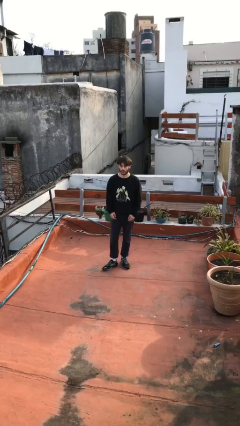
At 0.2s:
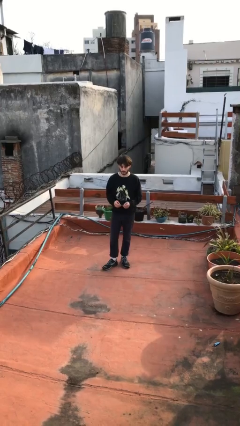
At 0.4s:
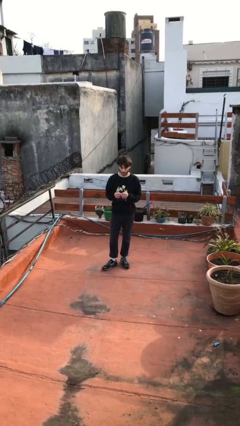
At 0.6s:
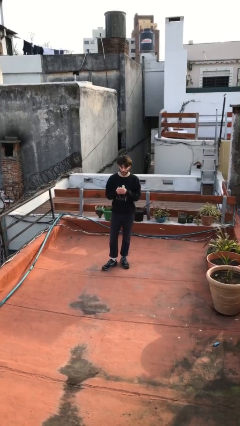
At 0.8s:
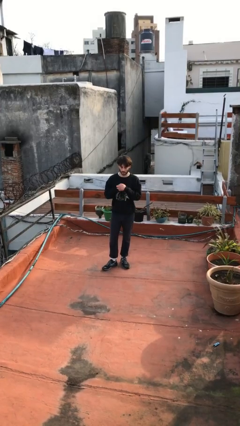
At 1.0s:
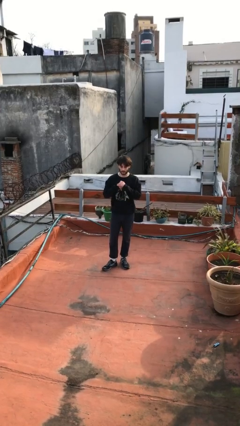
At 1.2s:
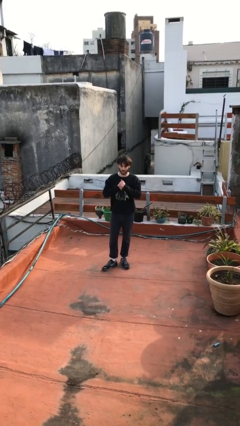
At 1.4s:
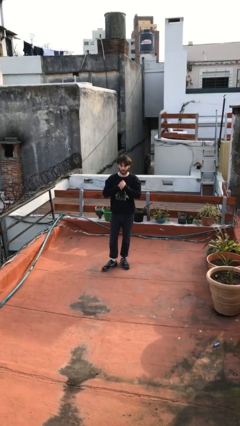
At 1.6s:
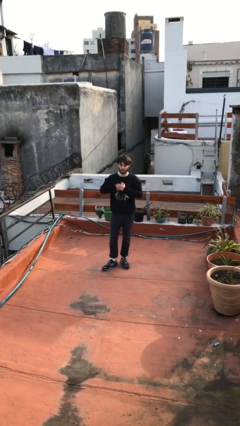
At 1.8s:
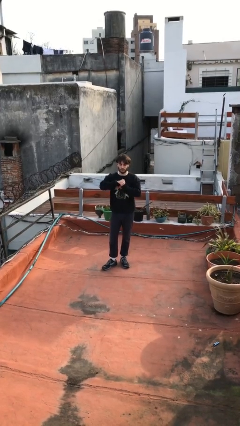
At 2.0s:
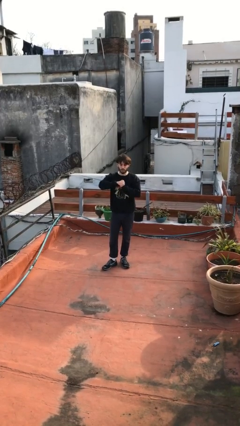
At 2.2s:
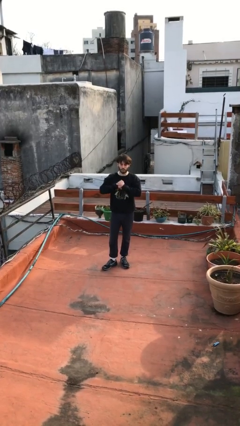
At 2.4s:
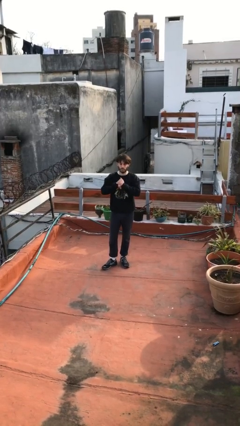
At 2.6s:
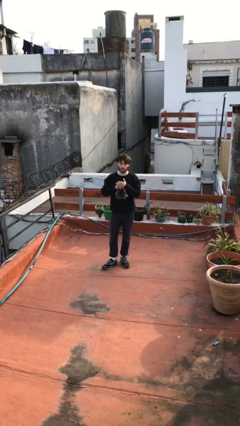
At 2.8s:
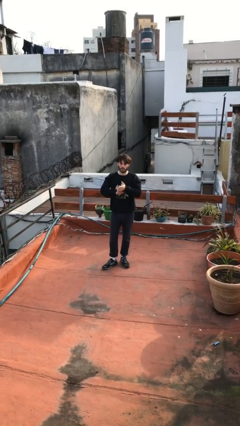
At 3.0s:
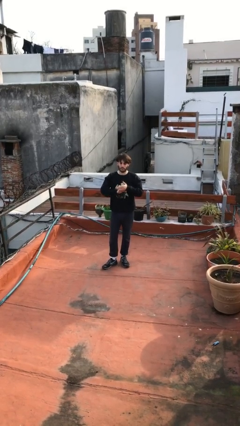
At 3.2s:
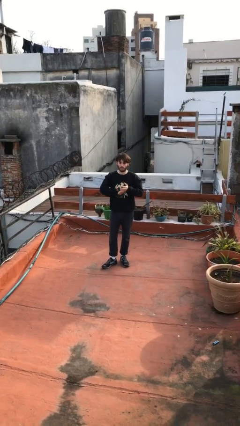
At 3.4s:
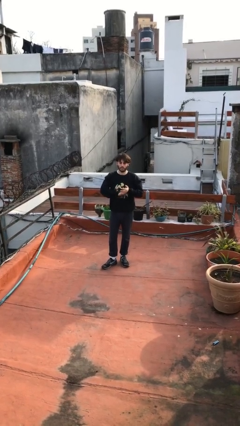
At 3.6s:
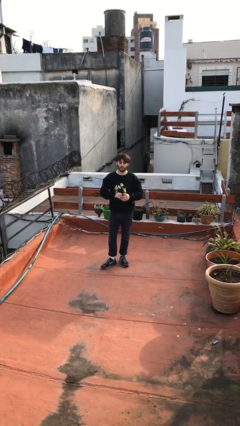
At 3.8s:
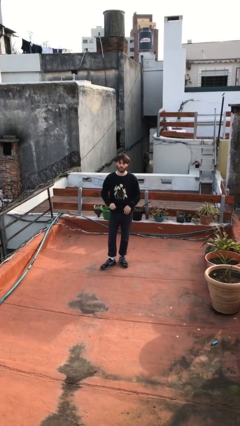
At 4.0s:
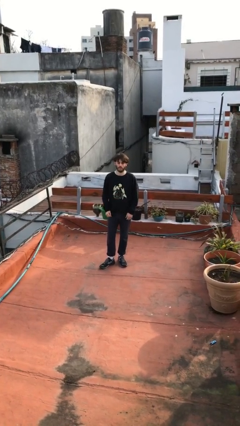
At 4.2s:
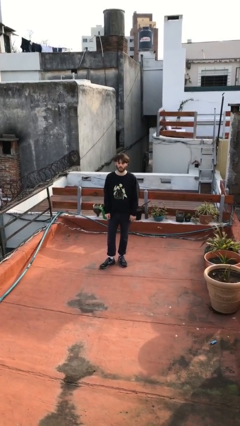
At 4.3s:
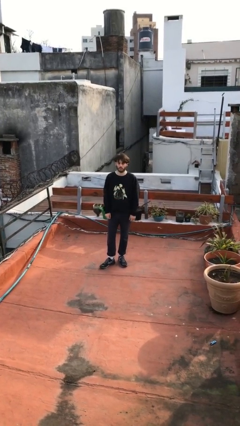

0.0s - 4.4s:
person cracks knuckles

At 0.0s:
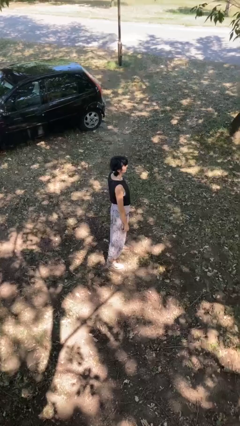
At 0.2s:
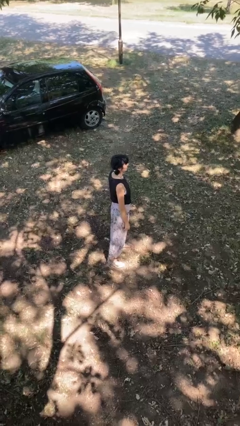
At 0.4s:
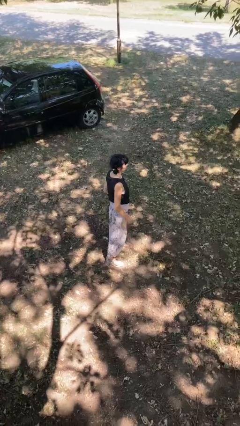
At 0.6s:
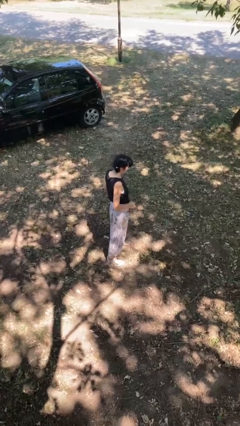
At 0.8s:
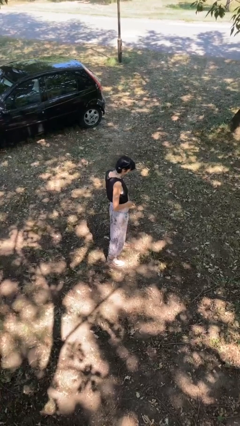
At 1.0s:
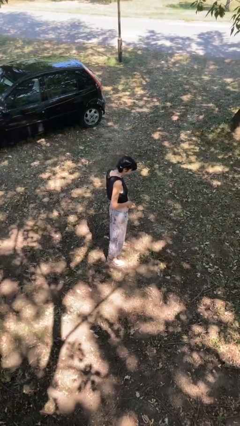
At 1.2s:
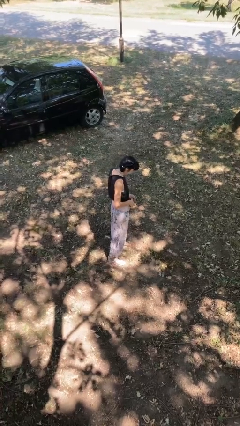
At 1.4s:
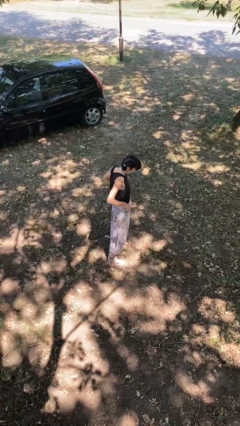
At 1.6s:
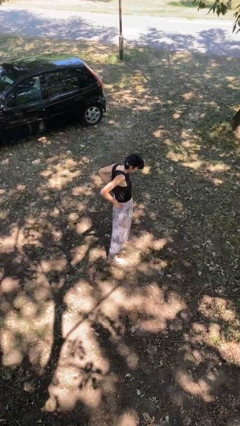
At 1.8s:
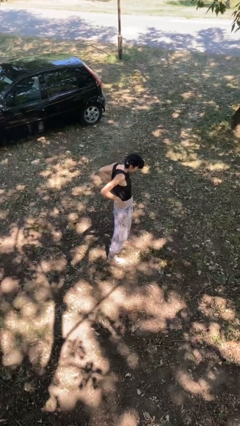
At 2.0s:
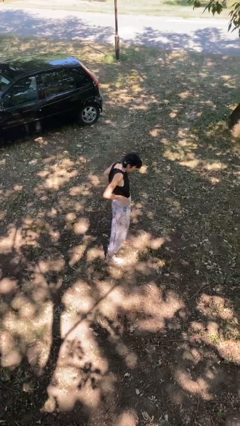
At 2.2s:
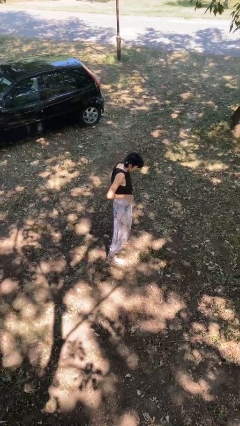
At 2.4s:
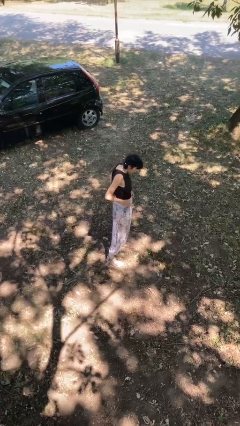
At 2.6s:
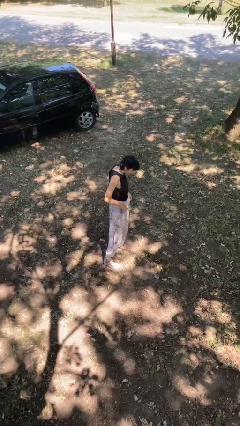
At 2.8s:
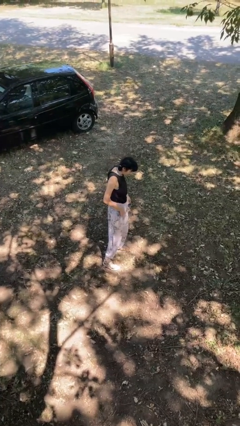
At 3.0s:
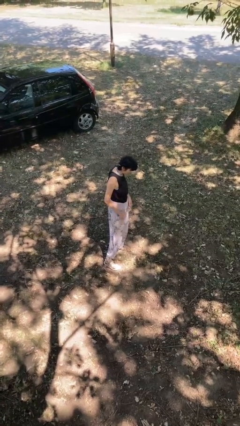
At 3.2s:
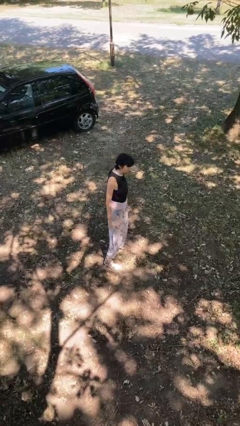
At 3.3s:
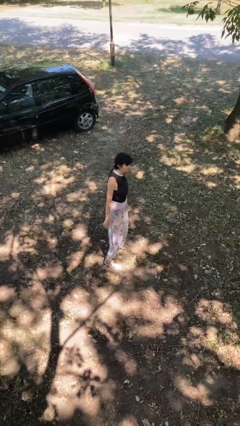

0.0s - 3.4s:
person hikes up pants

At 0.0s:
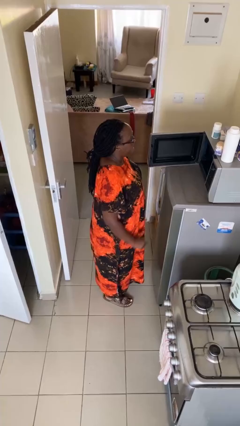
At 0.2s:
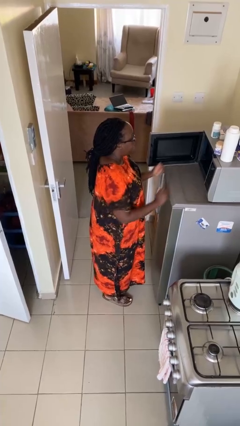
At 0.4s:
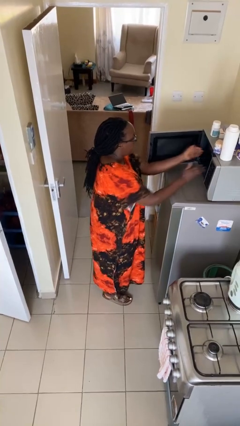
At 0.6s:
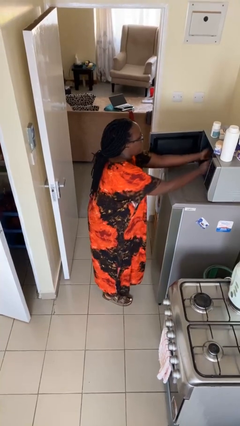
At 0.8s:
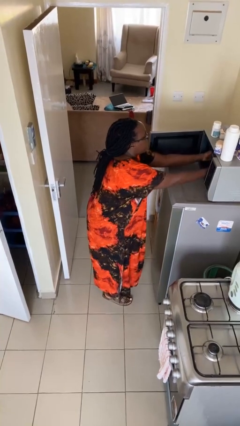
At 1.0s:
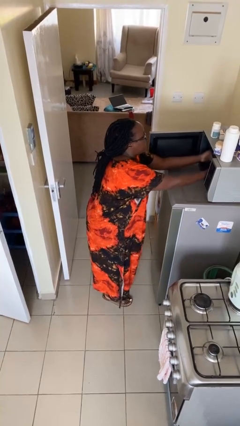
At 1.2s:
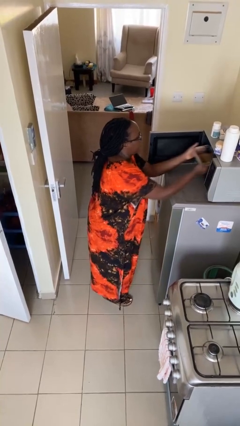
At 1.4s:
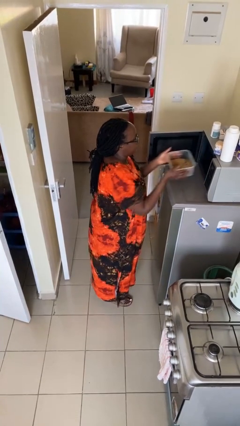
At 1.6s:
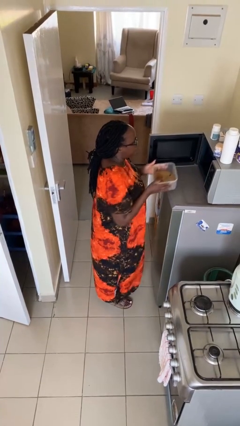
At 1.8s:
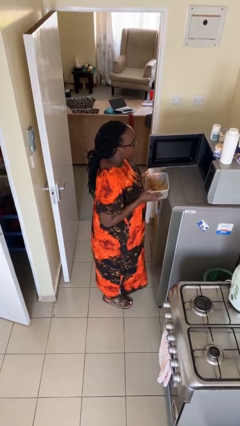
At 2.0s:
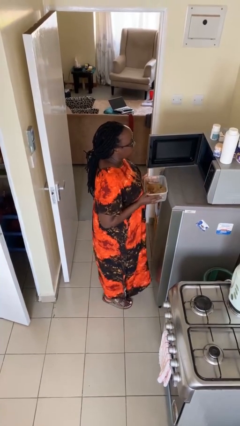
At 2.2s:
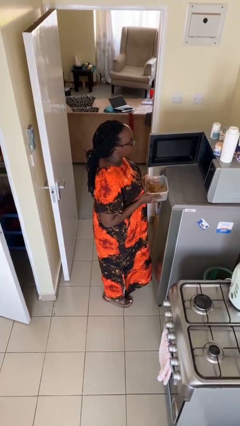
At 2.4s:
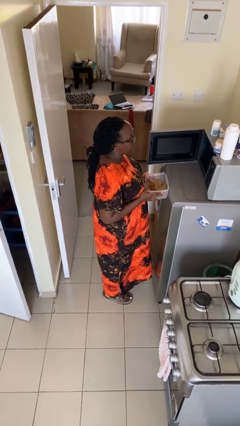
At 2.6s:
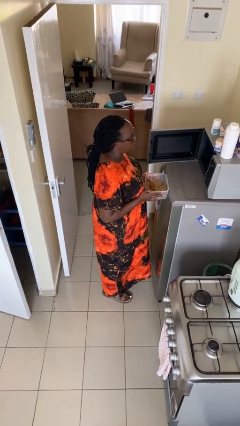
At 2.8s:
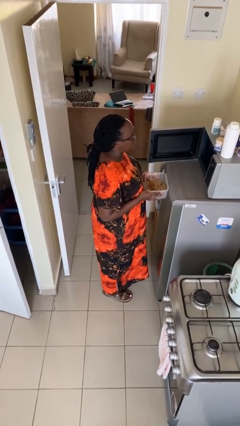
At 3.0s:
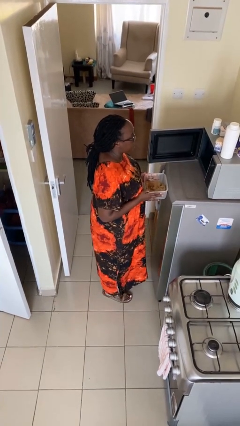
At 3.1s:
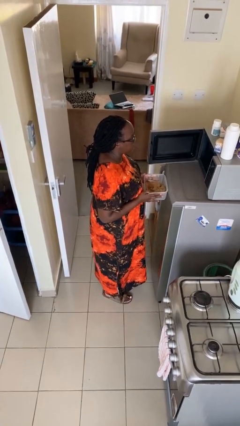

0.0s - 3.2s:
person takes object from microwave

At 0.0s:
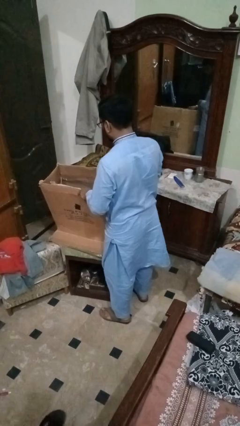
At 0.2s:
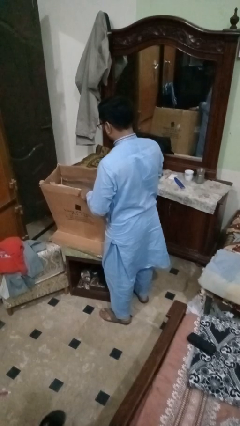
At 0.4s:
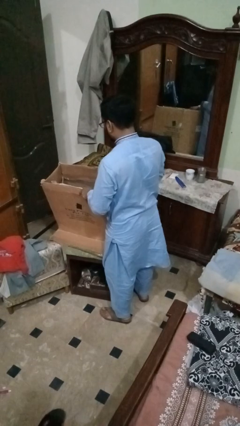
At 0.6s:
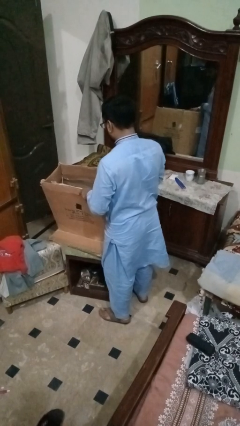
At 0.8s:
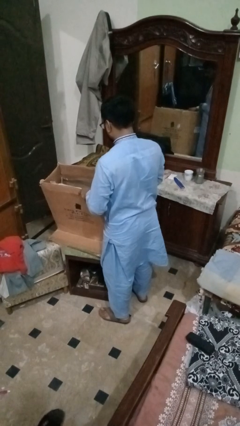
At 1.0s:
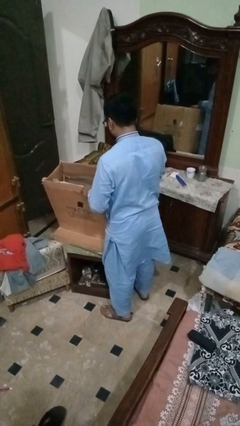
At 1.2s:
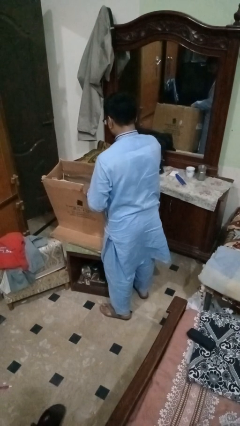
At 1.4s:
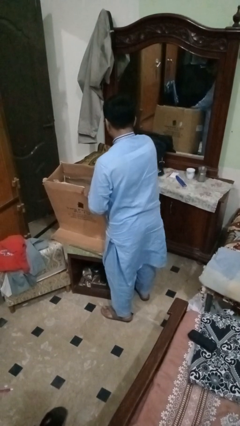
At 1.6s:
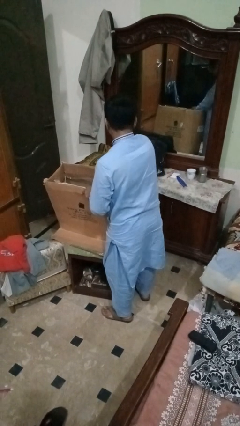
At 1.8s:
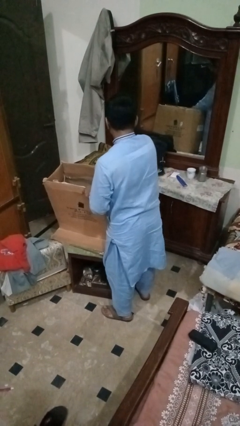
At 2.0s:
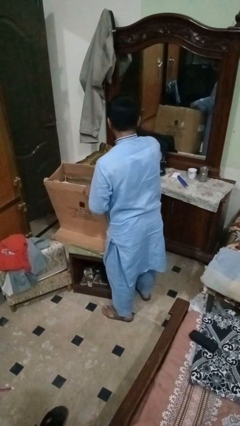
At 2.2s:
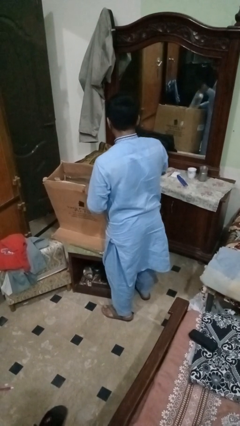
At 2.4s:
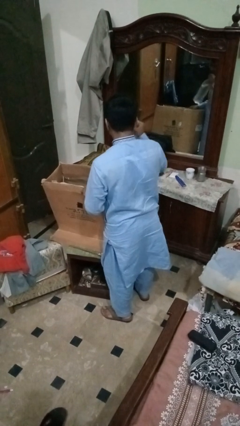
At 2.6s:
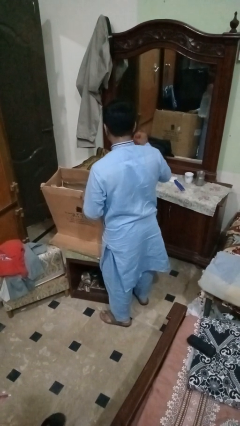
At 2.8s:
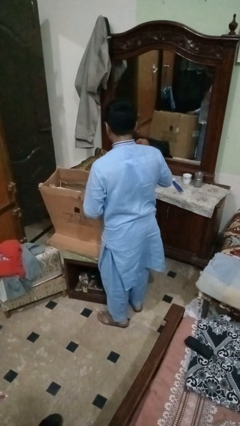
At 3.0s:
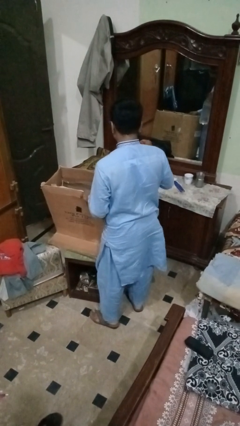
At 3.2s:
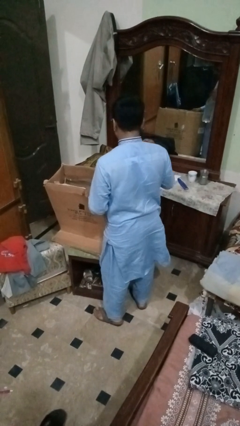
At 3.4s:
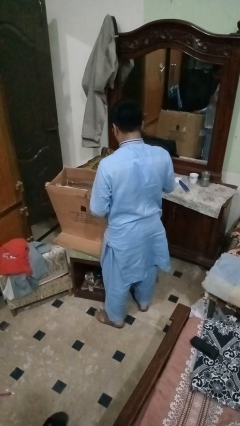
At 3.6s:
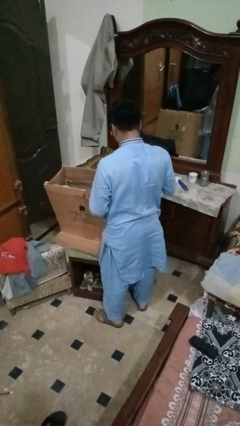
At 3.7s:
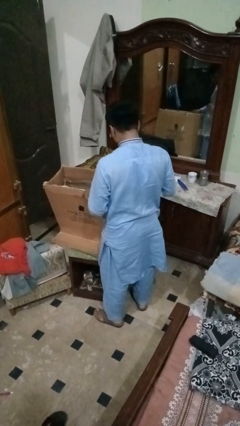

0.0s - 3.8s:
person takes object from box

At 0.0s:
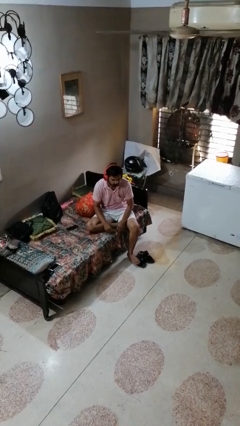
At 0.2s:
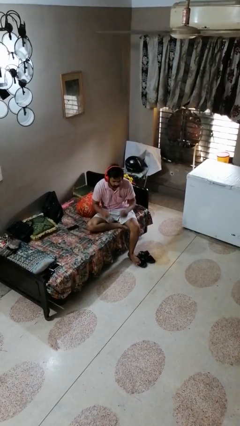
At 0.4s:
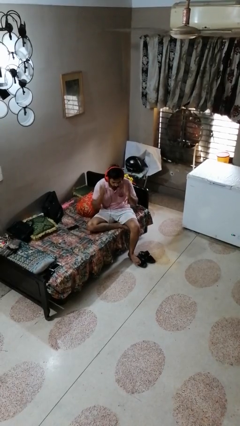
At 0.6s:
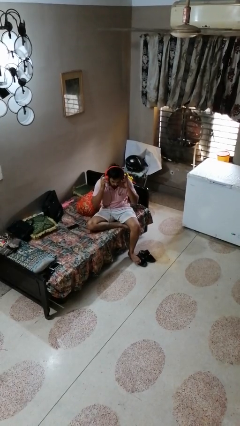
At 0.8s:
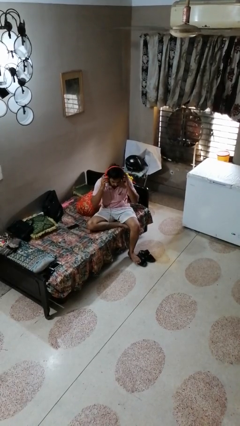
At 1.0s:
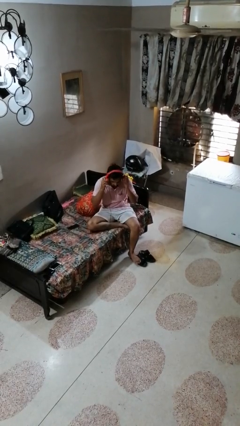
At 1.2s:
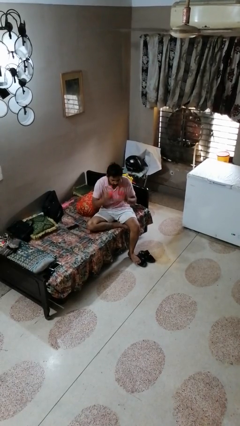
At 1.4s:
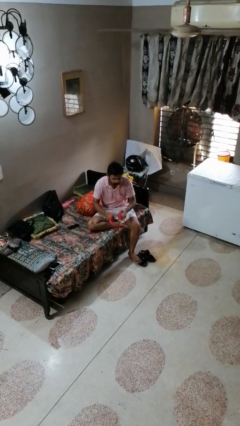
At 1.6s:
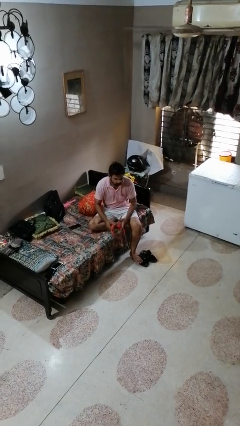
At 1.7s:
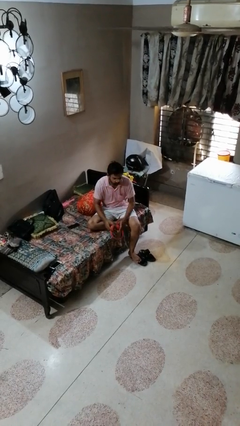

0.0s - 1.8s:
person takes off headphones

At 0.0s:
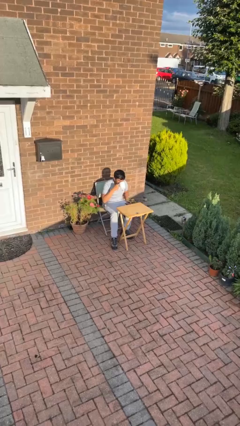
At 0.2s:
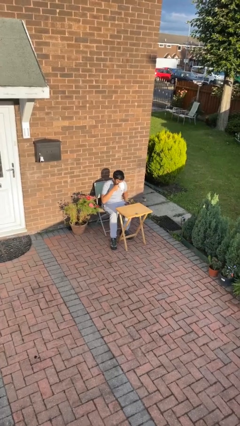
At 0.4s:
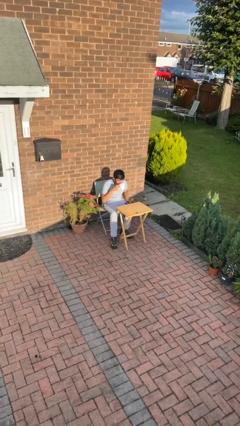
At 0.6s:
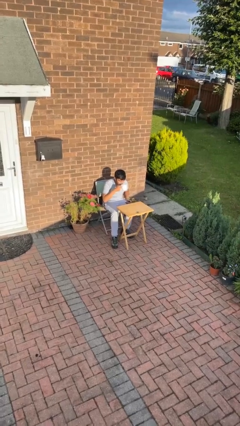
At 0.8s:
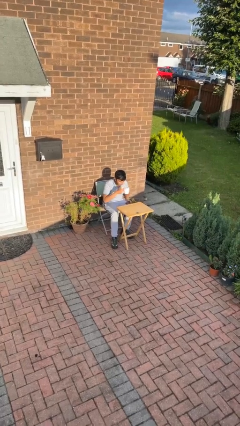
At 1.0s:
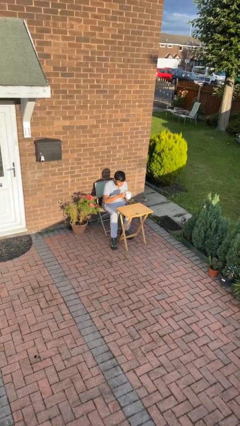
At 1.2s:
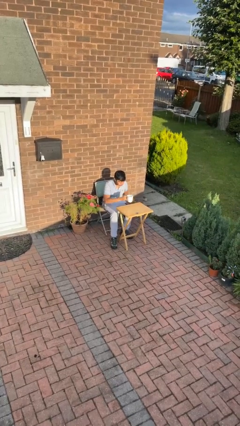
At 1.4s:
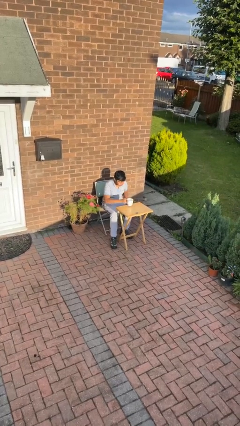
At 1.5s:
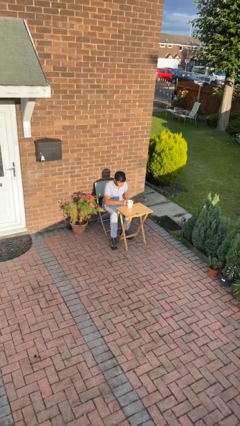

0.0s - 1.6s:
person puts down object on table
